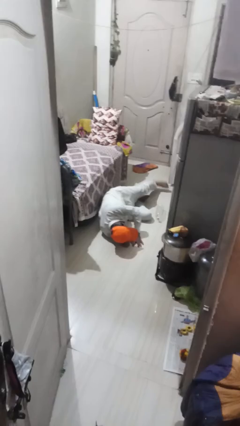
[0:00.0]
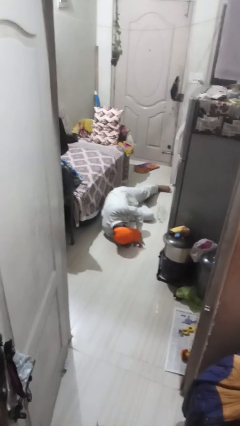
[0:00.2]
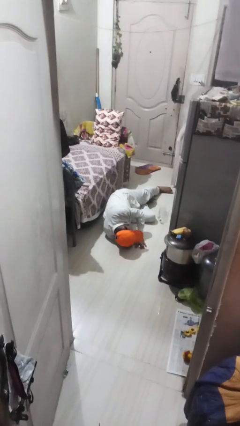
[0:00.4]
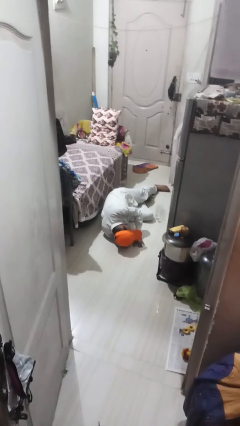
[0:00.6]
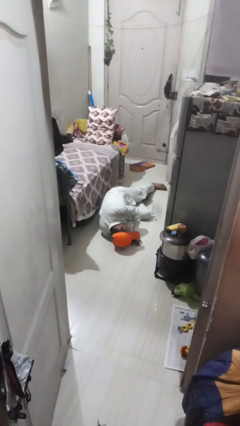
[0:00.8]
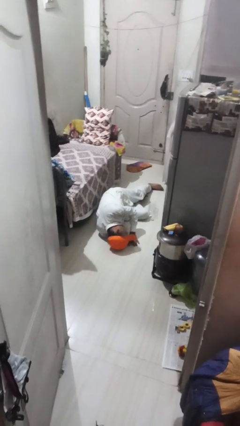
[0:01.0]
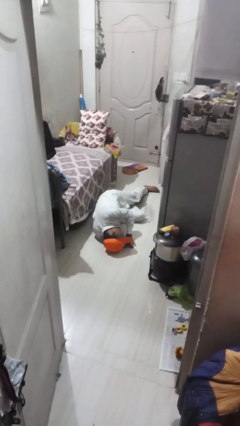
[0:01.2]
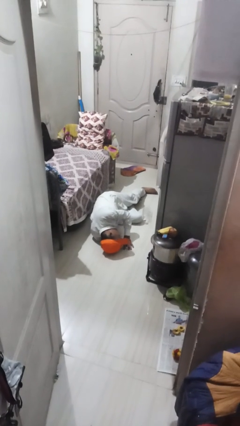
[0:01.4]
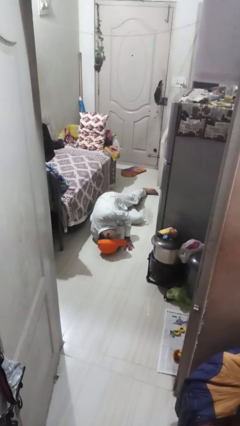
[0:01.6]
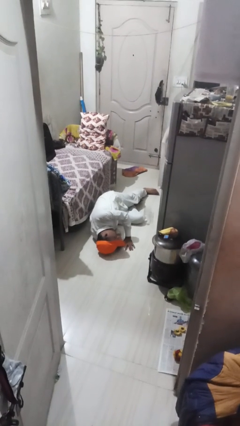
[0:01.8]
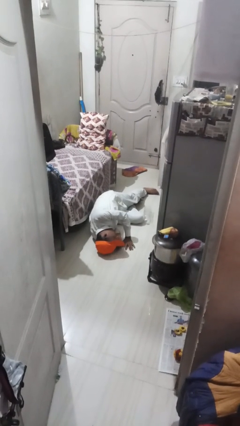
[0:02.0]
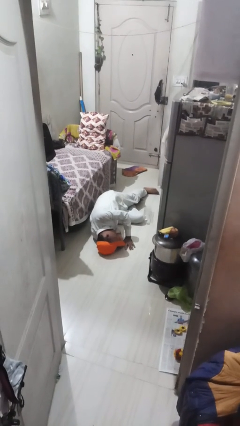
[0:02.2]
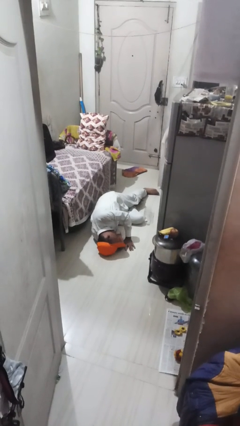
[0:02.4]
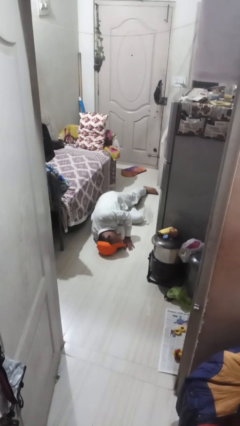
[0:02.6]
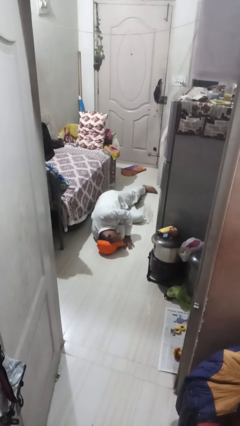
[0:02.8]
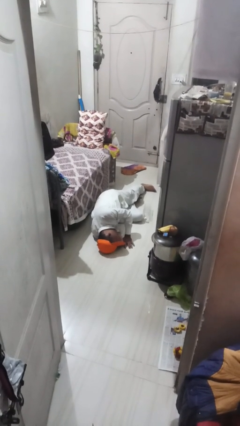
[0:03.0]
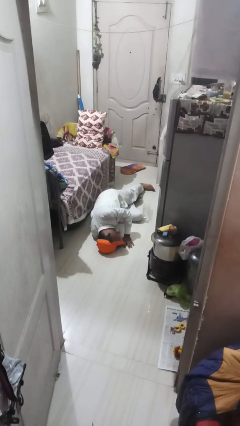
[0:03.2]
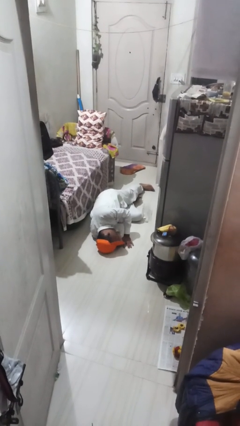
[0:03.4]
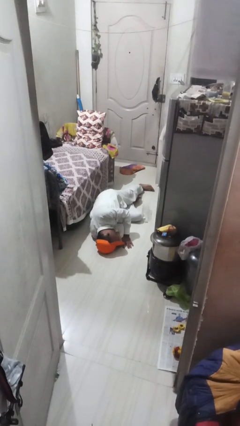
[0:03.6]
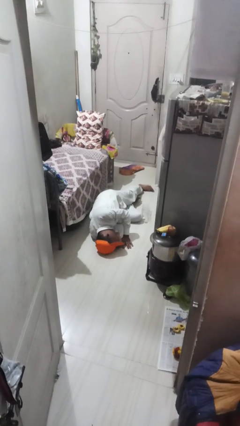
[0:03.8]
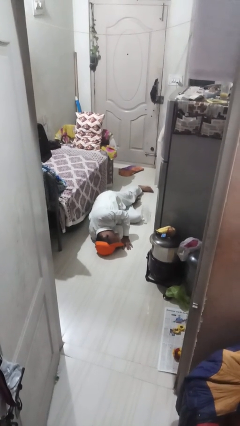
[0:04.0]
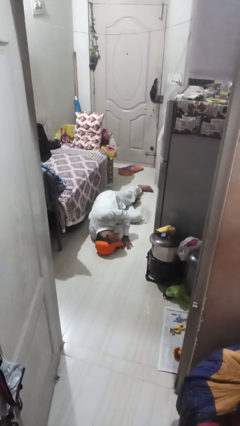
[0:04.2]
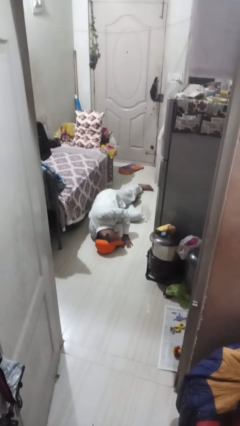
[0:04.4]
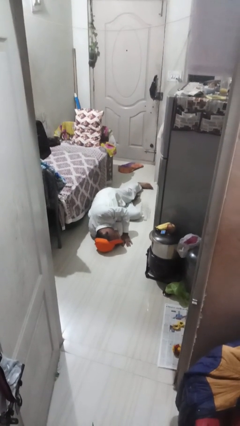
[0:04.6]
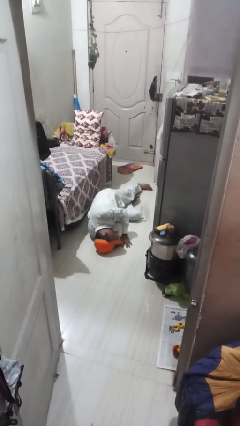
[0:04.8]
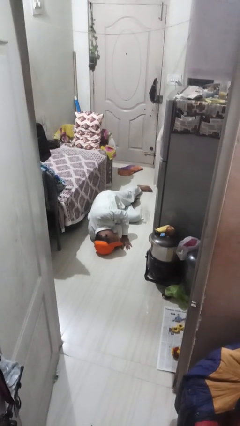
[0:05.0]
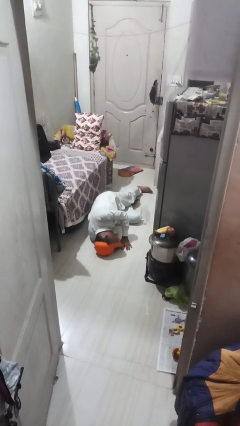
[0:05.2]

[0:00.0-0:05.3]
person lies down on floor

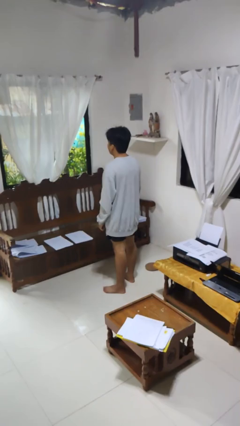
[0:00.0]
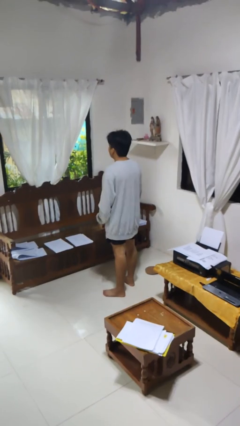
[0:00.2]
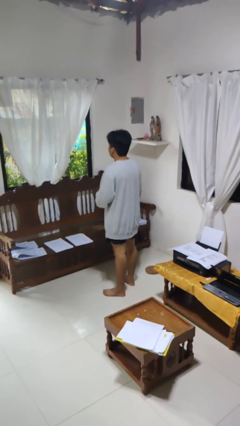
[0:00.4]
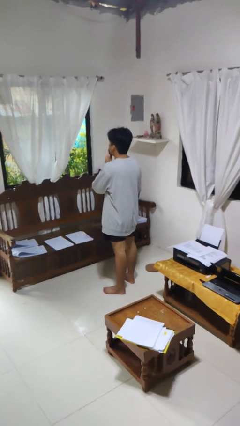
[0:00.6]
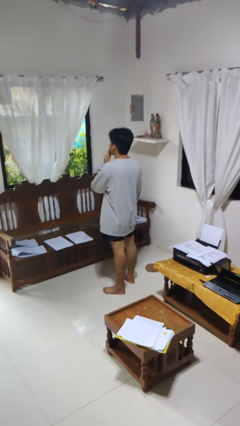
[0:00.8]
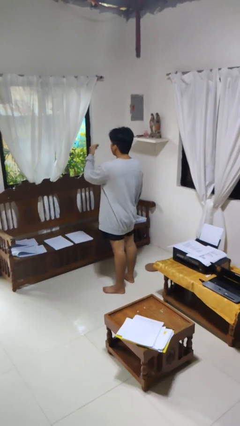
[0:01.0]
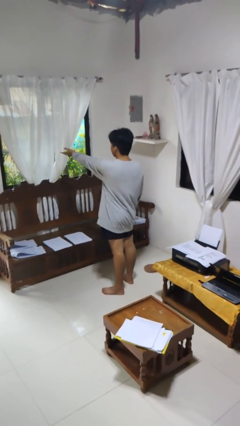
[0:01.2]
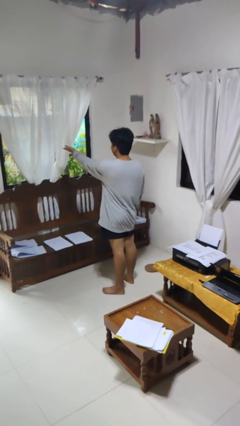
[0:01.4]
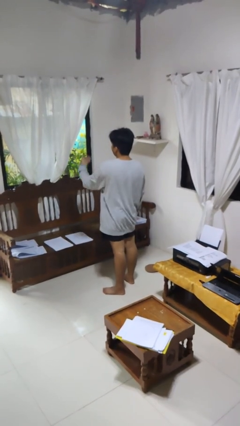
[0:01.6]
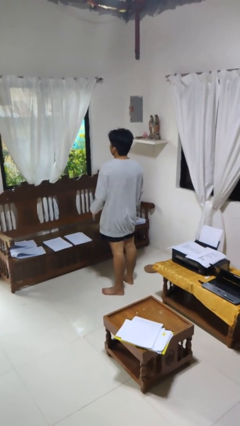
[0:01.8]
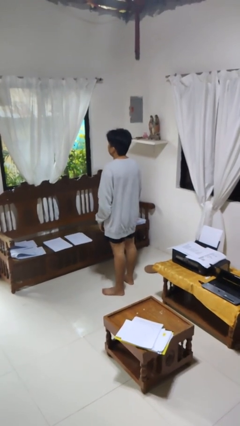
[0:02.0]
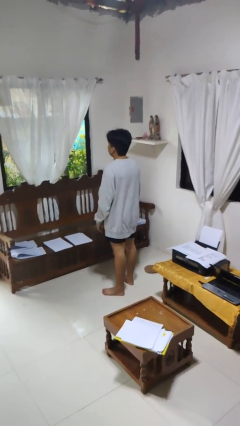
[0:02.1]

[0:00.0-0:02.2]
person gestures blow kiss

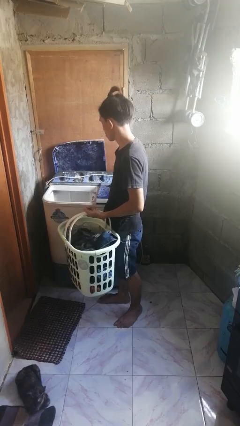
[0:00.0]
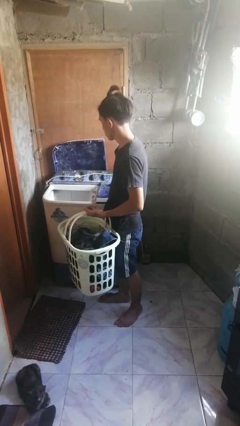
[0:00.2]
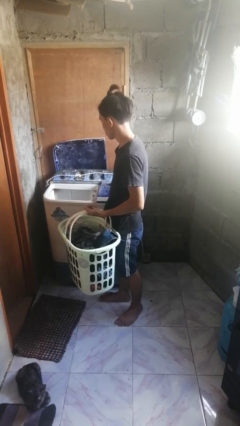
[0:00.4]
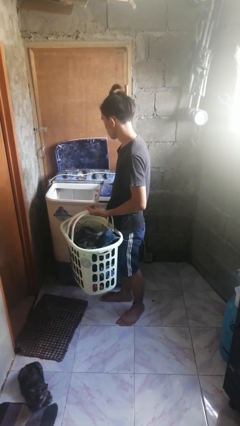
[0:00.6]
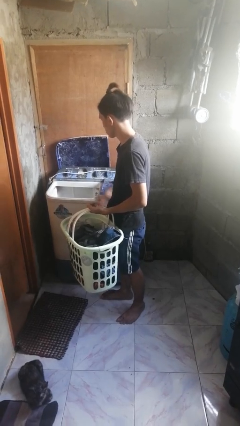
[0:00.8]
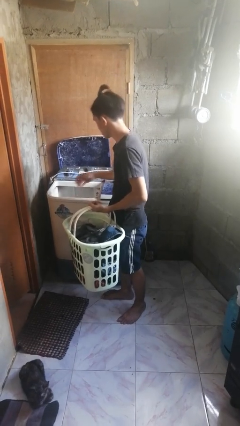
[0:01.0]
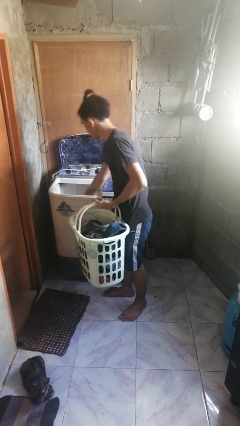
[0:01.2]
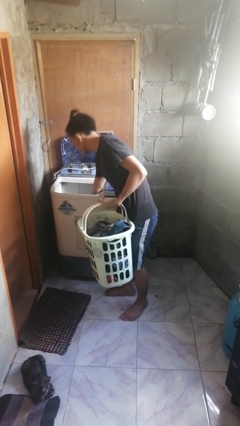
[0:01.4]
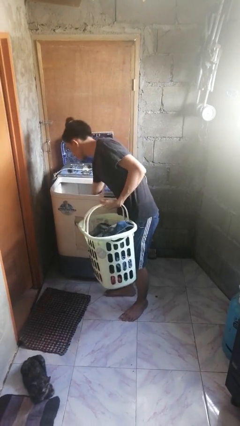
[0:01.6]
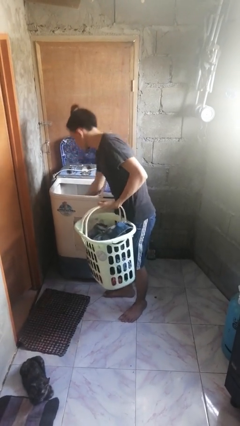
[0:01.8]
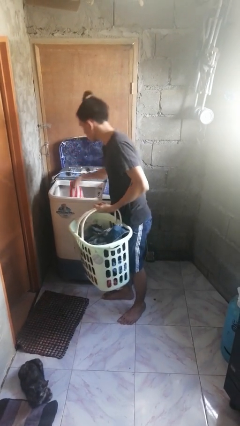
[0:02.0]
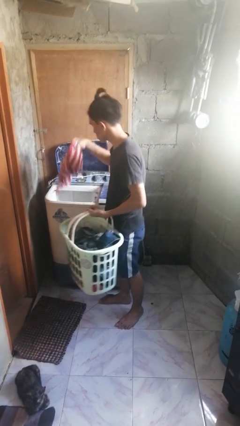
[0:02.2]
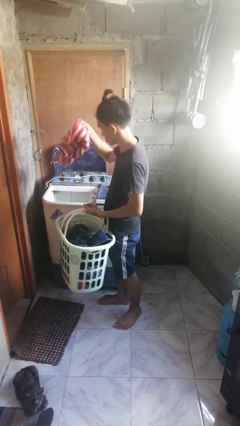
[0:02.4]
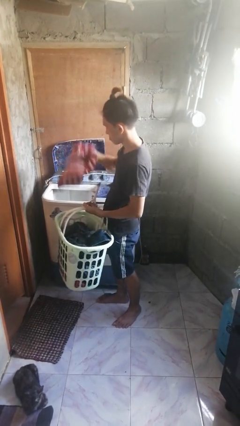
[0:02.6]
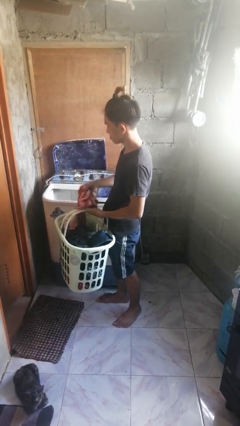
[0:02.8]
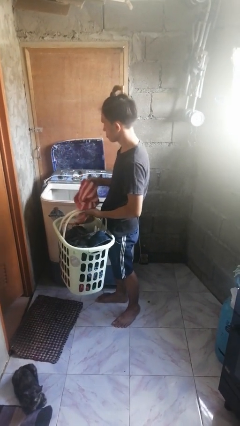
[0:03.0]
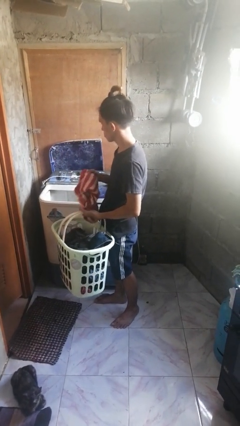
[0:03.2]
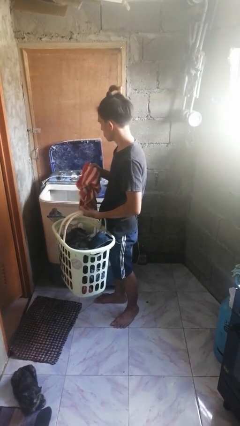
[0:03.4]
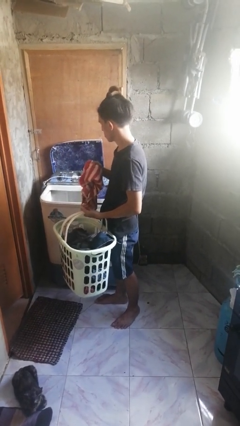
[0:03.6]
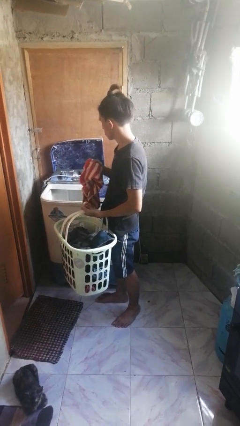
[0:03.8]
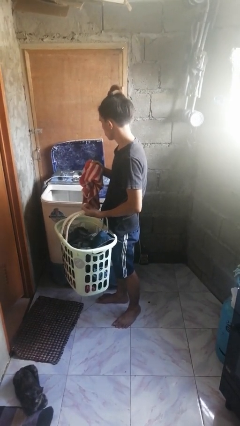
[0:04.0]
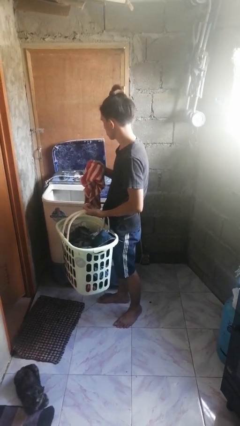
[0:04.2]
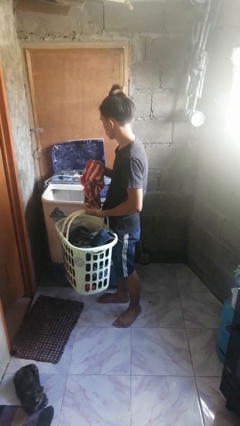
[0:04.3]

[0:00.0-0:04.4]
person unloads clotheswasher

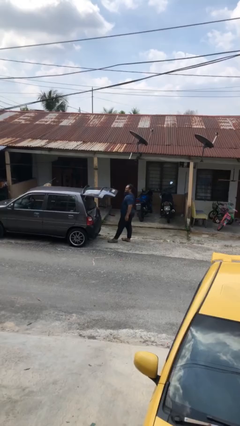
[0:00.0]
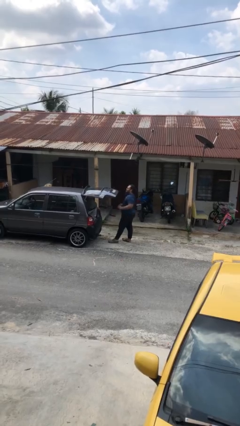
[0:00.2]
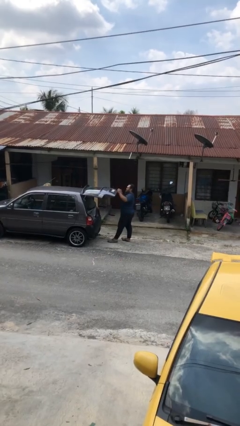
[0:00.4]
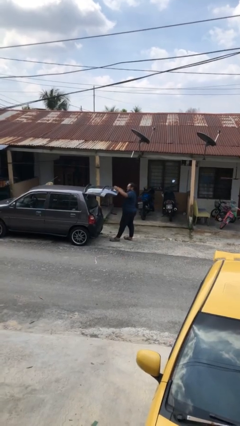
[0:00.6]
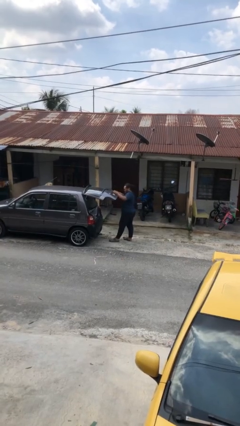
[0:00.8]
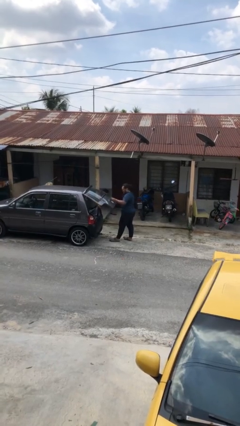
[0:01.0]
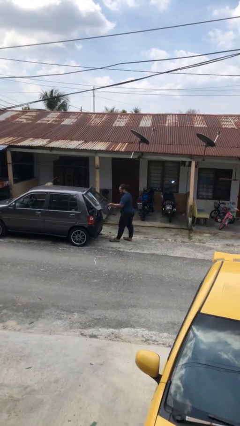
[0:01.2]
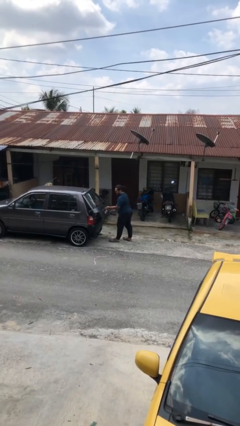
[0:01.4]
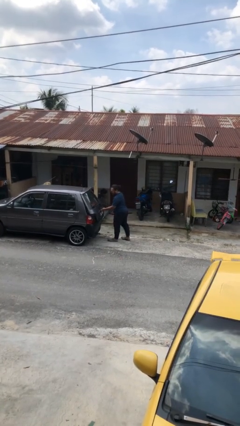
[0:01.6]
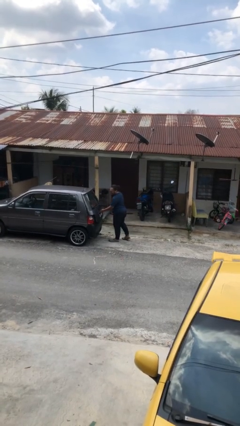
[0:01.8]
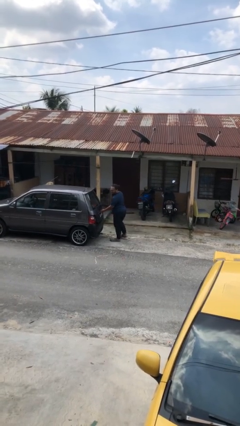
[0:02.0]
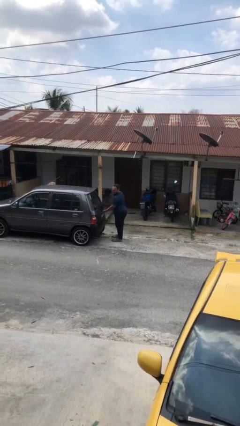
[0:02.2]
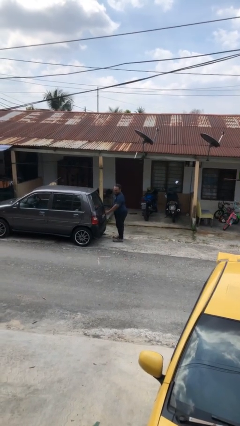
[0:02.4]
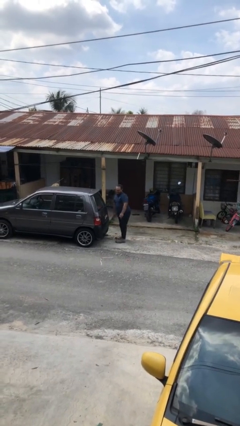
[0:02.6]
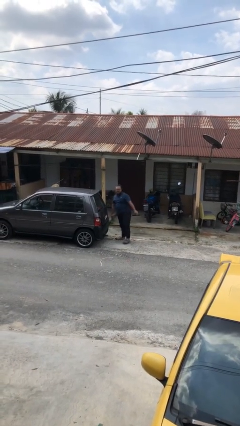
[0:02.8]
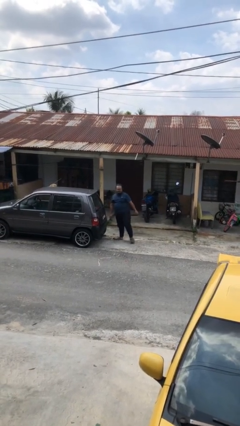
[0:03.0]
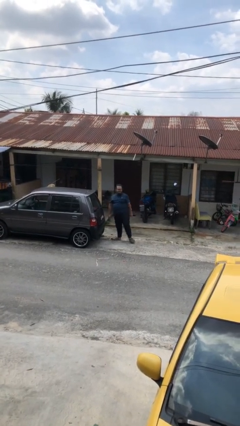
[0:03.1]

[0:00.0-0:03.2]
person closes car trunk

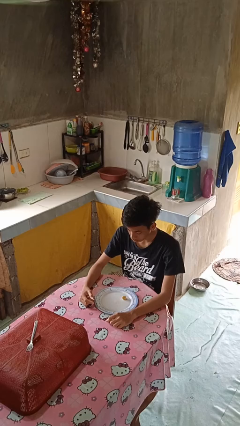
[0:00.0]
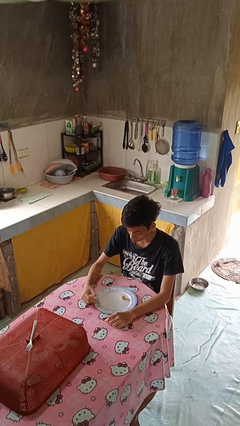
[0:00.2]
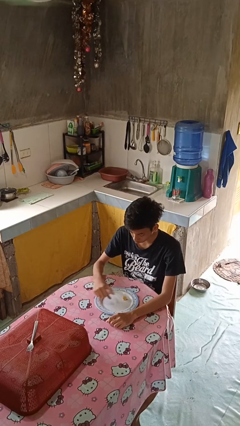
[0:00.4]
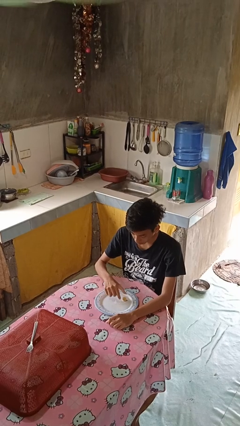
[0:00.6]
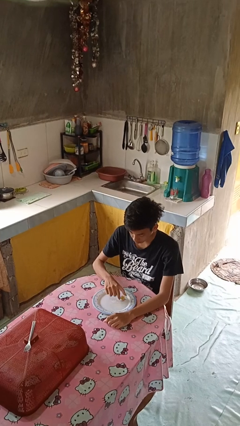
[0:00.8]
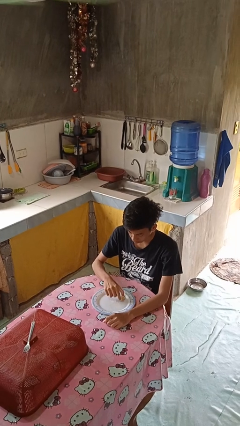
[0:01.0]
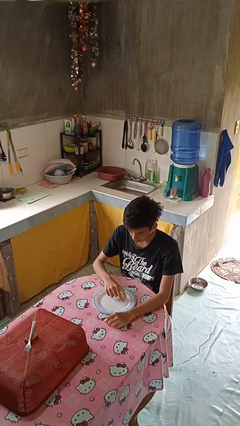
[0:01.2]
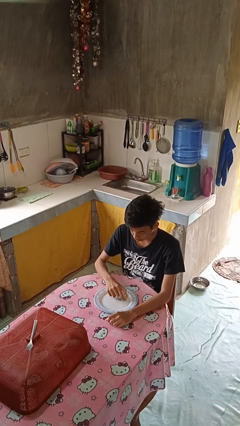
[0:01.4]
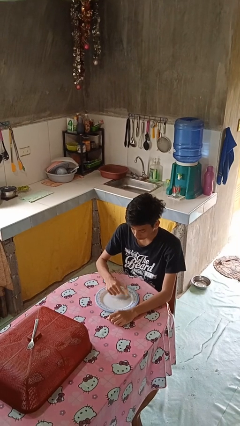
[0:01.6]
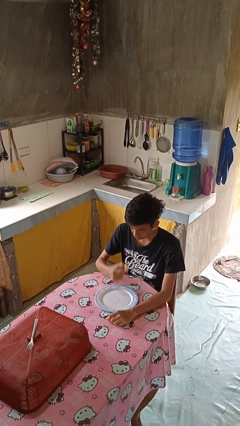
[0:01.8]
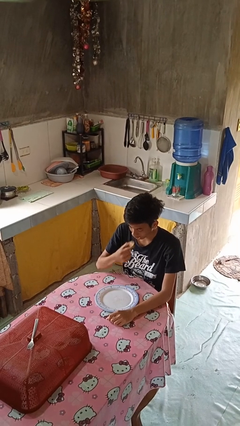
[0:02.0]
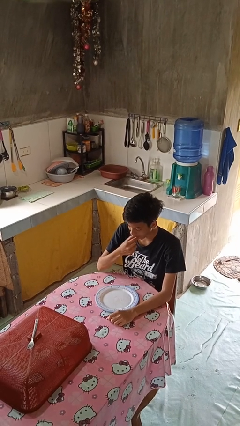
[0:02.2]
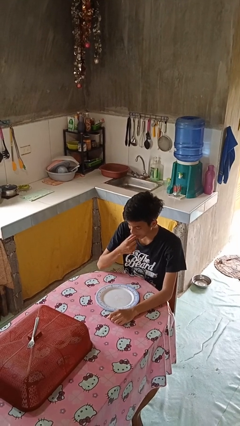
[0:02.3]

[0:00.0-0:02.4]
person eats with hands

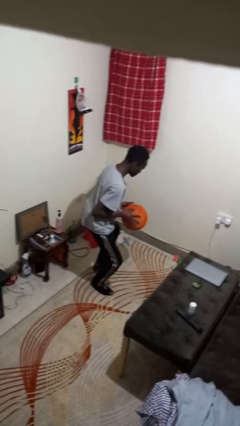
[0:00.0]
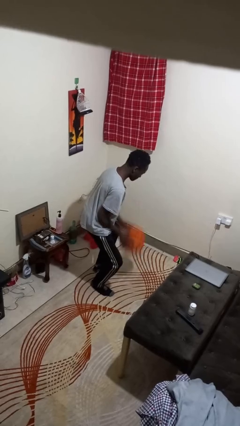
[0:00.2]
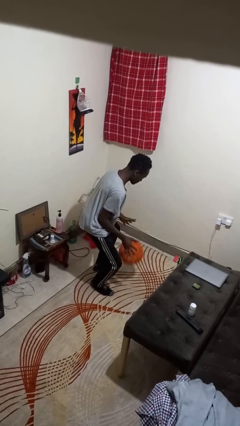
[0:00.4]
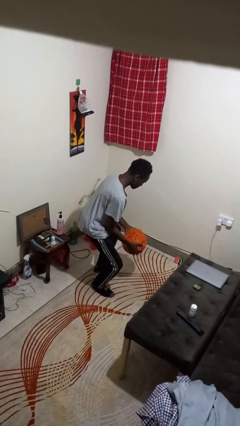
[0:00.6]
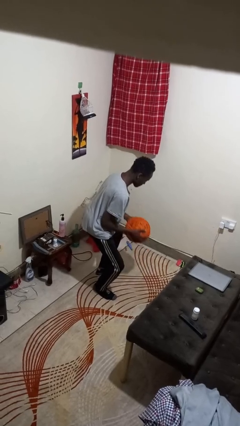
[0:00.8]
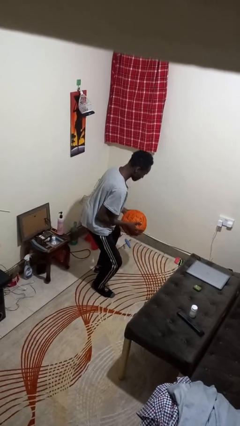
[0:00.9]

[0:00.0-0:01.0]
person bounces ball on floor
